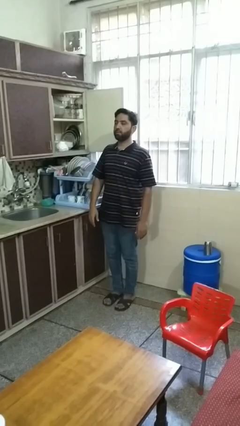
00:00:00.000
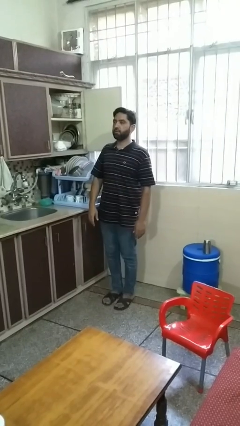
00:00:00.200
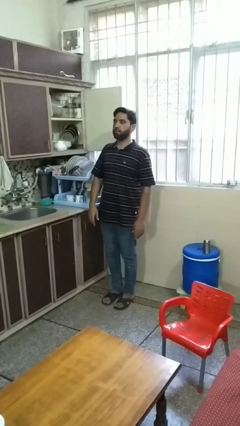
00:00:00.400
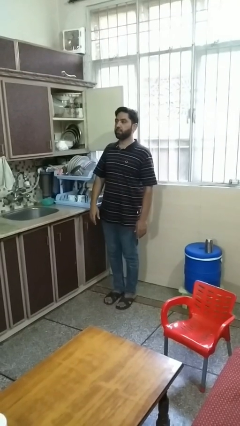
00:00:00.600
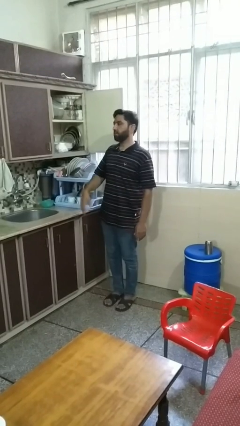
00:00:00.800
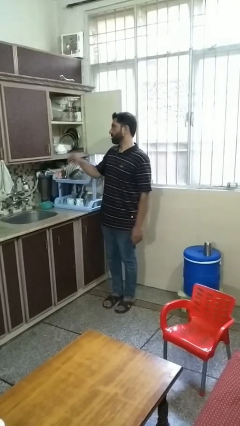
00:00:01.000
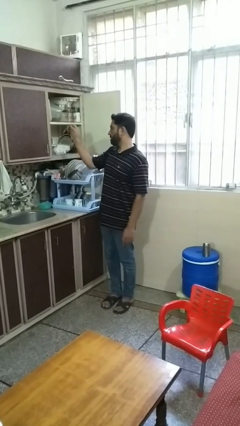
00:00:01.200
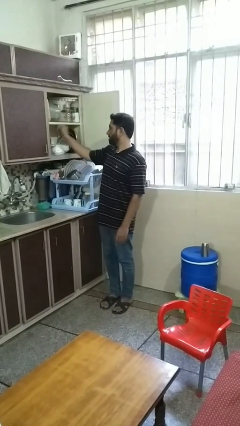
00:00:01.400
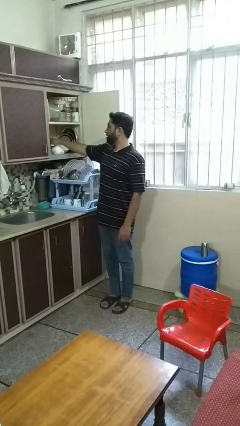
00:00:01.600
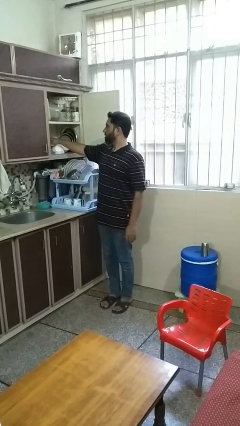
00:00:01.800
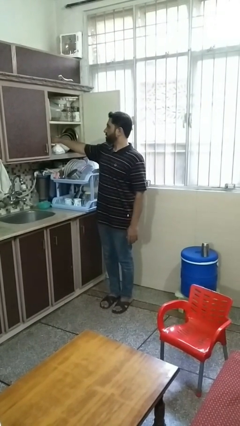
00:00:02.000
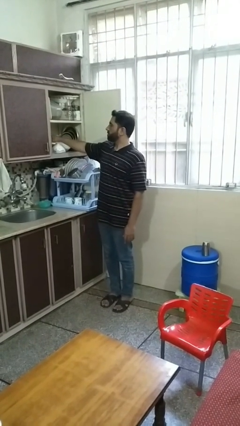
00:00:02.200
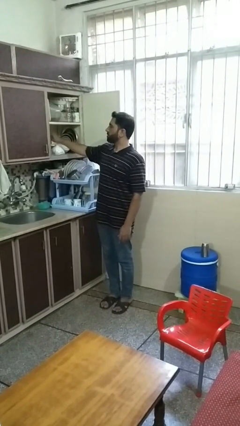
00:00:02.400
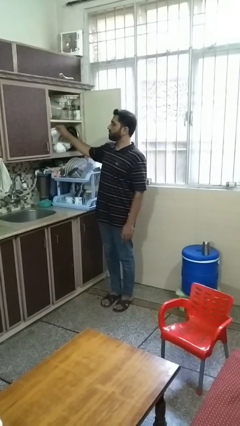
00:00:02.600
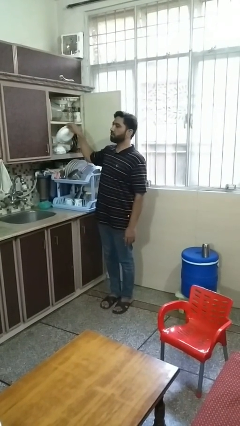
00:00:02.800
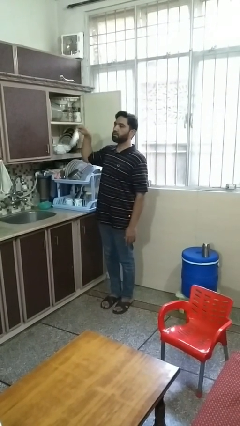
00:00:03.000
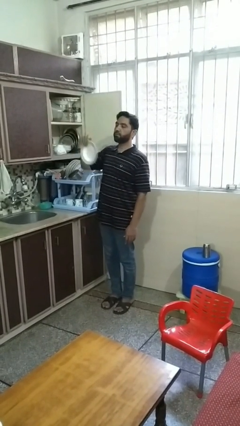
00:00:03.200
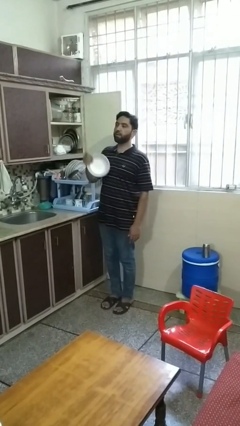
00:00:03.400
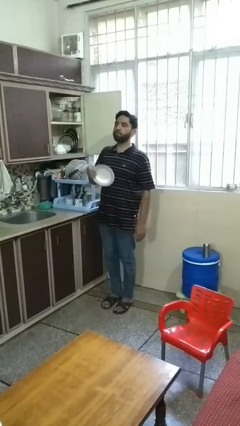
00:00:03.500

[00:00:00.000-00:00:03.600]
person takes object from cabinet

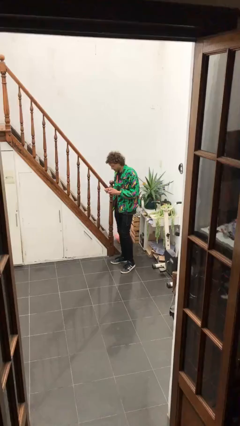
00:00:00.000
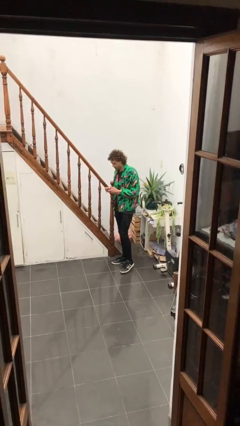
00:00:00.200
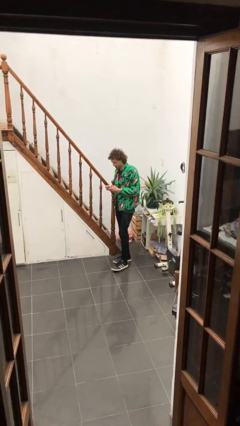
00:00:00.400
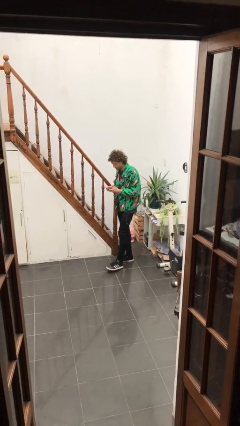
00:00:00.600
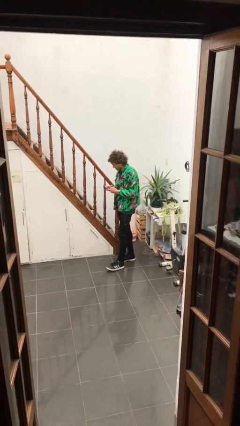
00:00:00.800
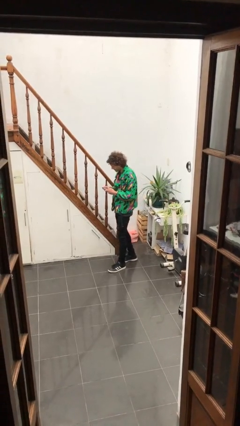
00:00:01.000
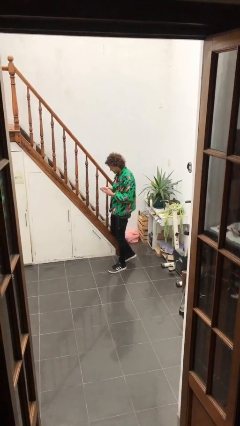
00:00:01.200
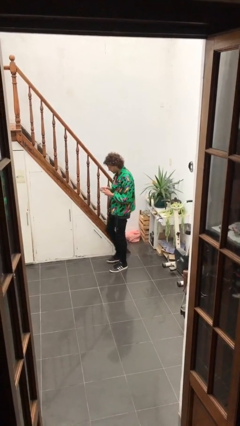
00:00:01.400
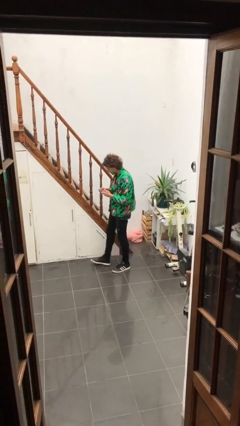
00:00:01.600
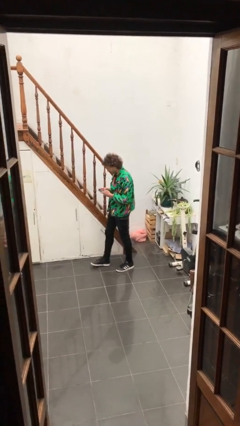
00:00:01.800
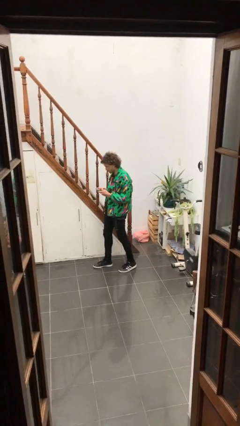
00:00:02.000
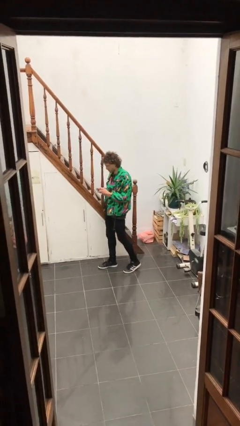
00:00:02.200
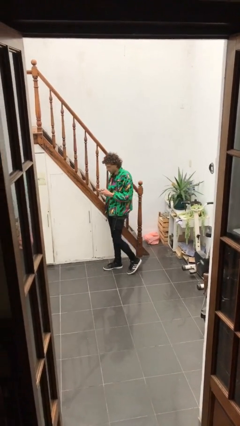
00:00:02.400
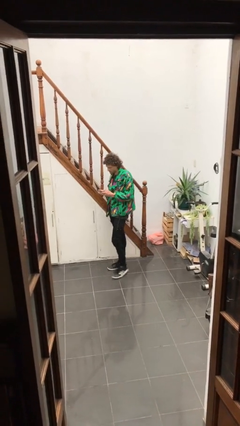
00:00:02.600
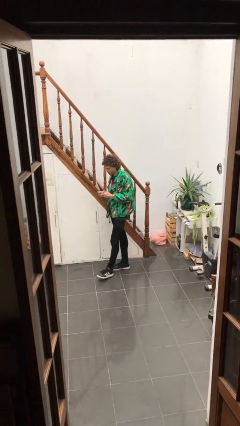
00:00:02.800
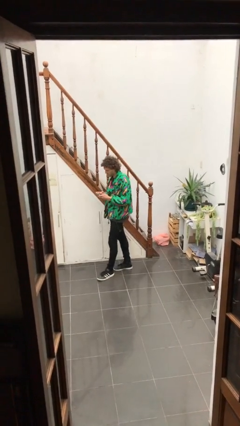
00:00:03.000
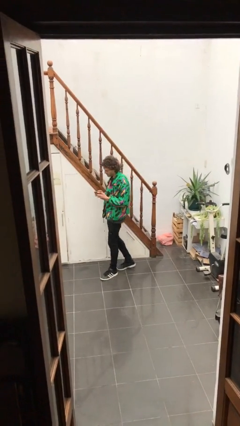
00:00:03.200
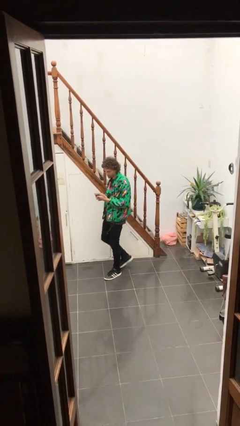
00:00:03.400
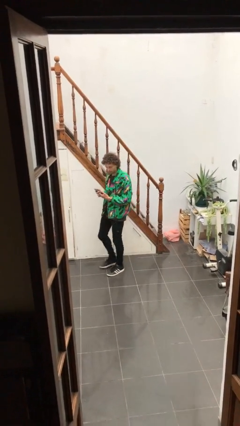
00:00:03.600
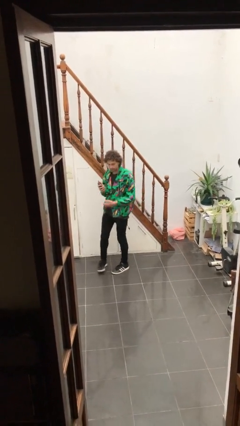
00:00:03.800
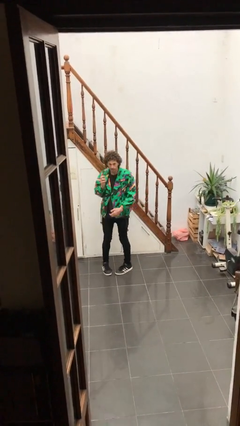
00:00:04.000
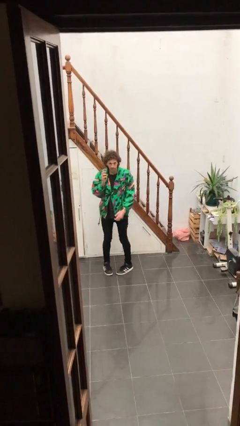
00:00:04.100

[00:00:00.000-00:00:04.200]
person texts on phone

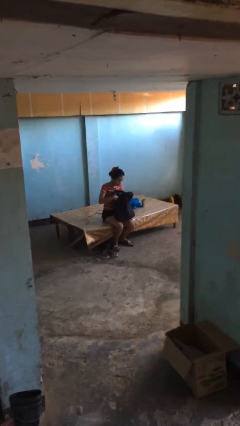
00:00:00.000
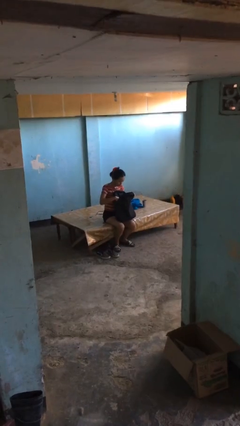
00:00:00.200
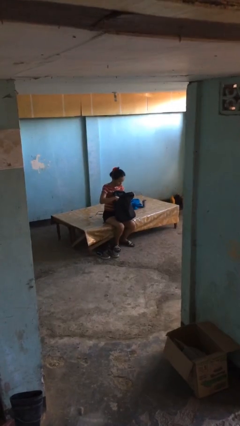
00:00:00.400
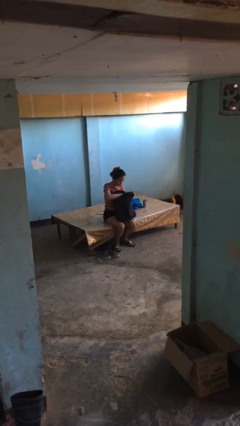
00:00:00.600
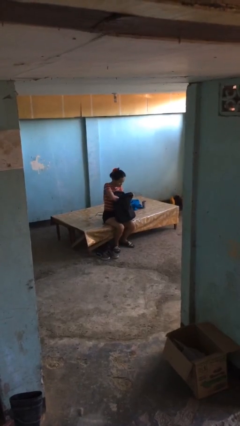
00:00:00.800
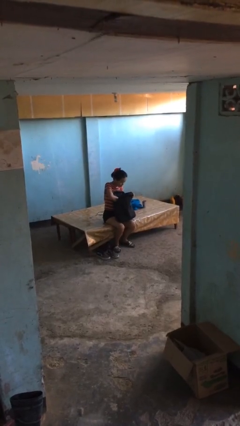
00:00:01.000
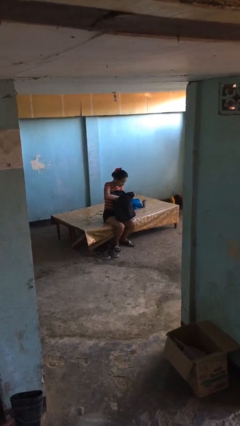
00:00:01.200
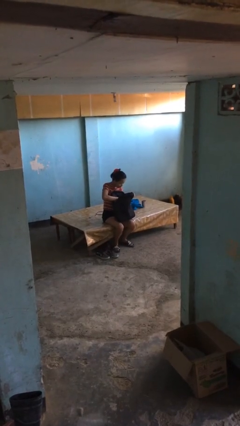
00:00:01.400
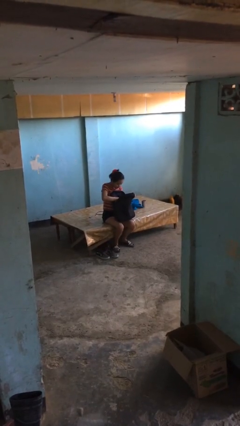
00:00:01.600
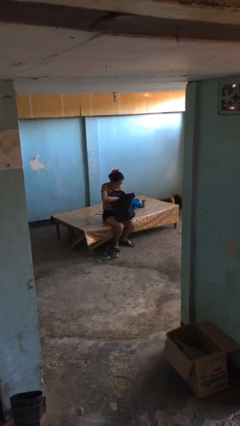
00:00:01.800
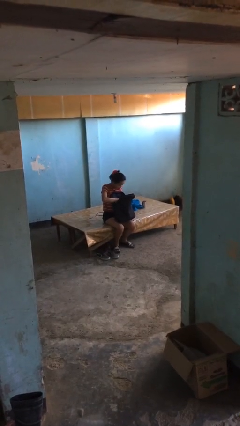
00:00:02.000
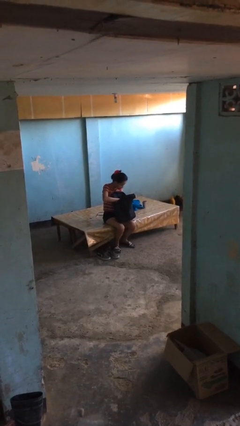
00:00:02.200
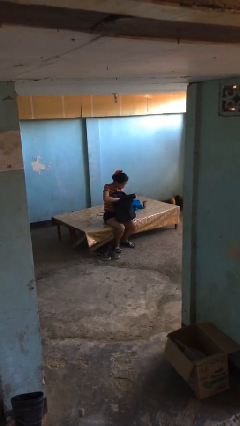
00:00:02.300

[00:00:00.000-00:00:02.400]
person searches in backpack

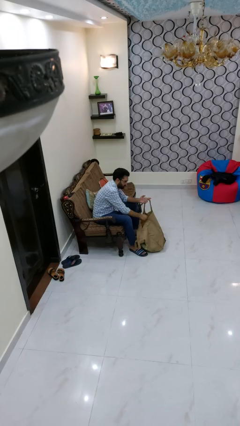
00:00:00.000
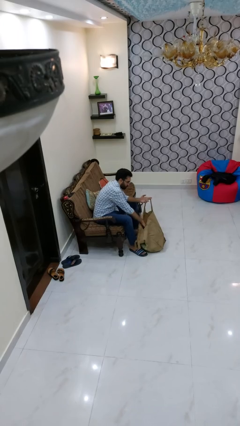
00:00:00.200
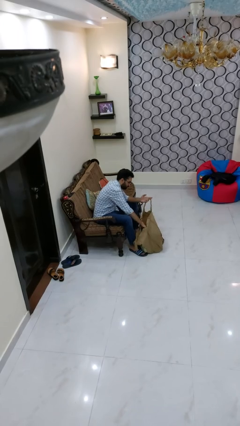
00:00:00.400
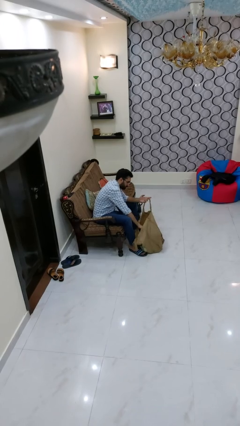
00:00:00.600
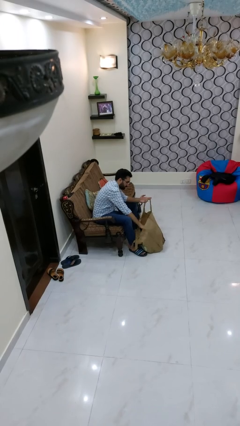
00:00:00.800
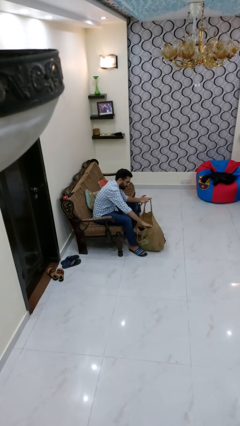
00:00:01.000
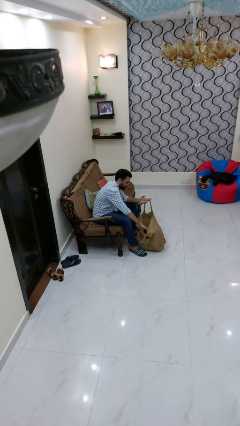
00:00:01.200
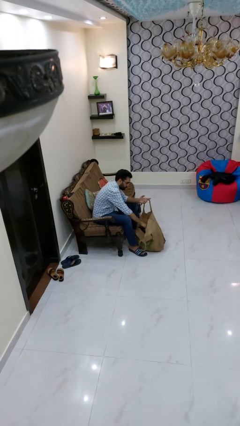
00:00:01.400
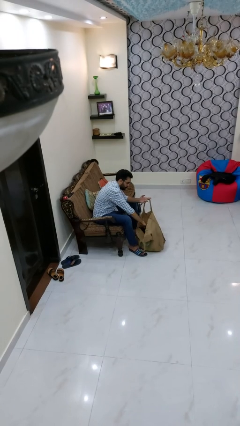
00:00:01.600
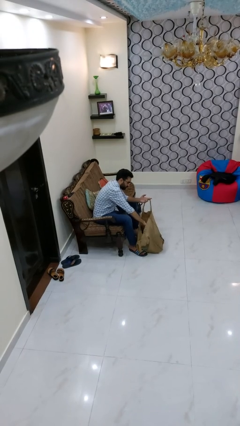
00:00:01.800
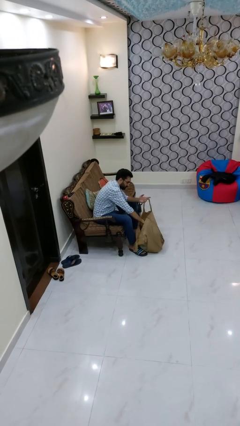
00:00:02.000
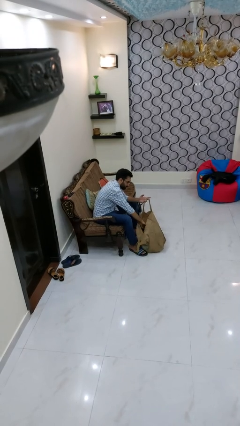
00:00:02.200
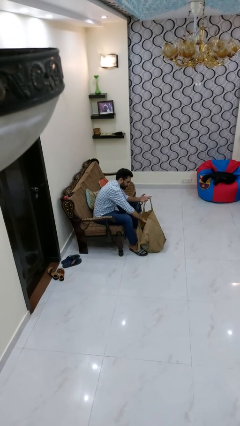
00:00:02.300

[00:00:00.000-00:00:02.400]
person searches in bag

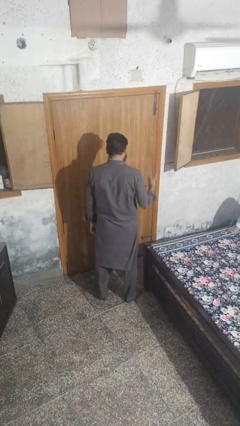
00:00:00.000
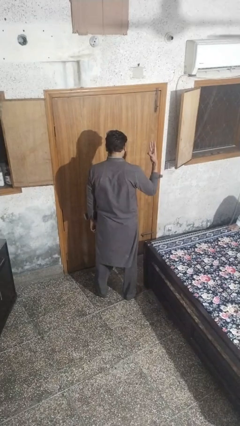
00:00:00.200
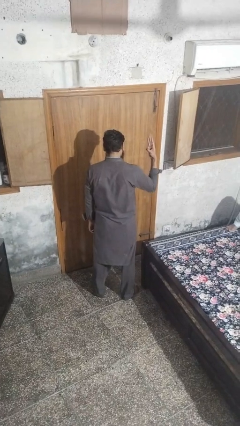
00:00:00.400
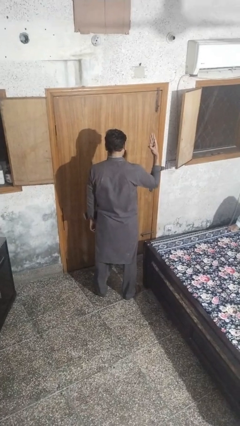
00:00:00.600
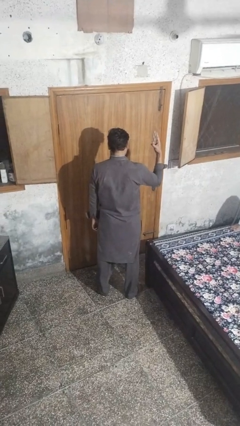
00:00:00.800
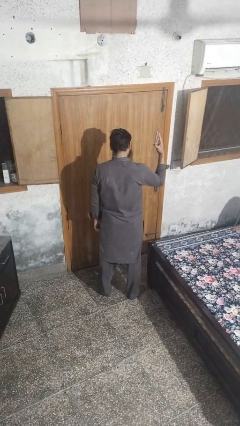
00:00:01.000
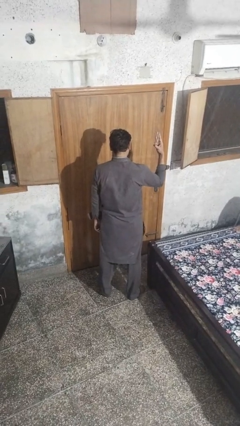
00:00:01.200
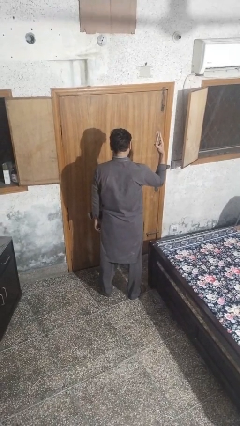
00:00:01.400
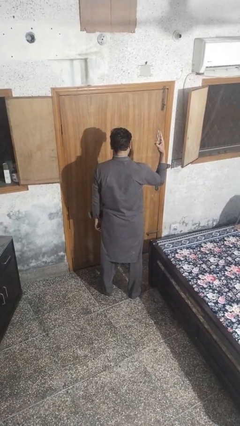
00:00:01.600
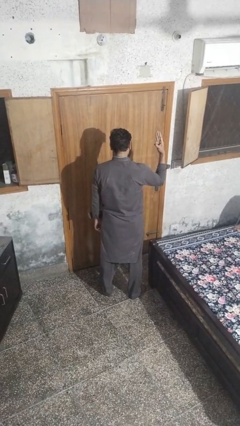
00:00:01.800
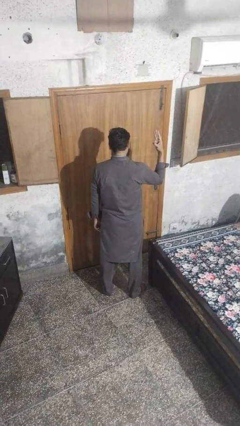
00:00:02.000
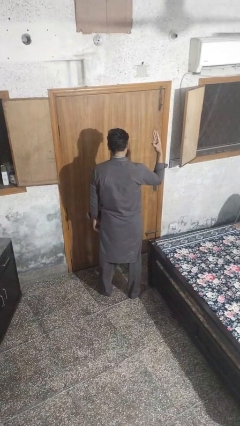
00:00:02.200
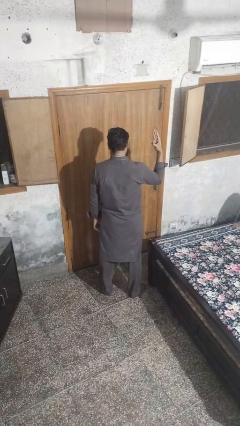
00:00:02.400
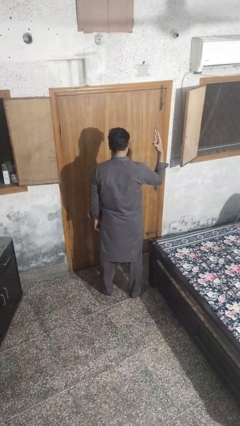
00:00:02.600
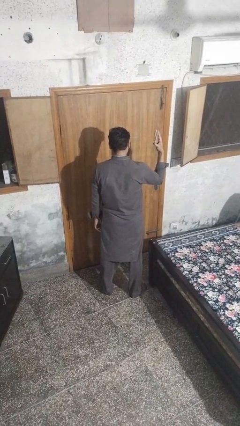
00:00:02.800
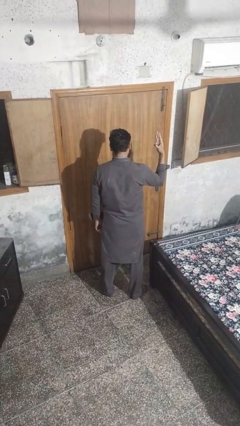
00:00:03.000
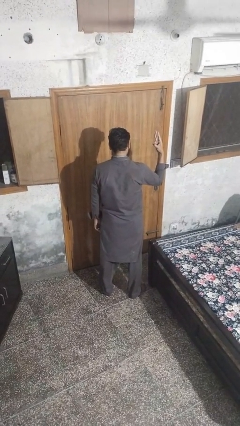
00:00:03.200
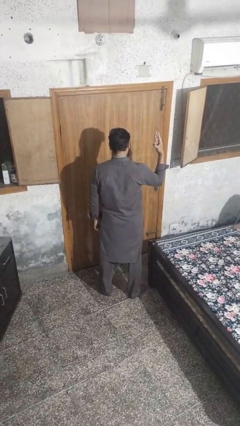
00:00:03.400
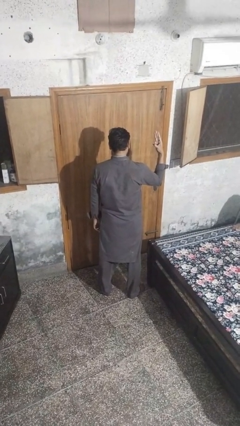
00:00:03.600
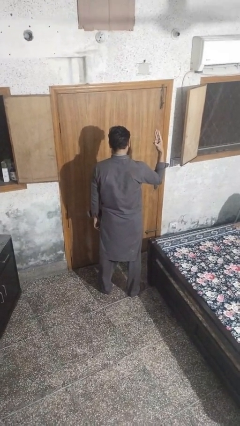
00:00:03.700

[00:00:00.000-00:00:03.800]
person gestures number three

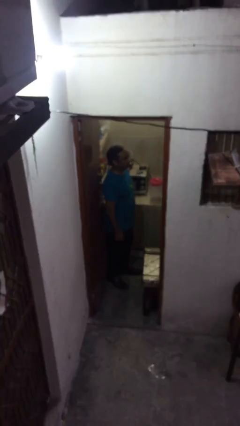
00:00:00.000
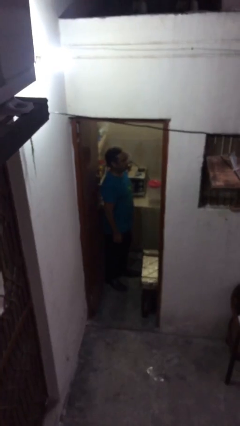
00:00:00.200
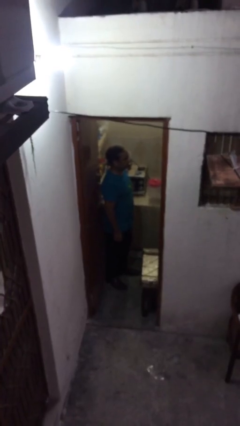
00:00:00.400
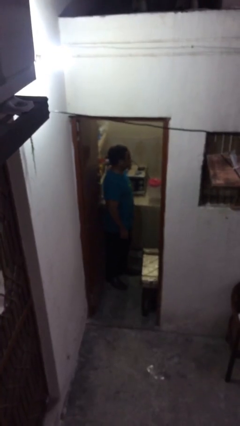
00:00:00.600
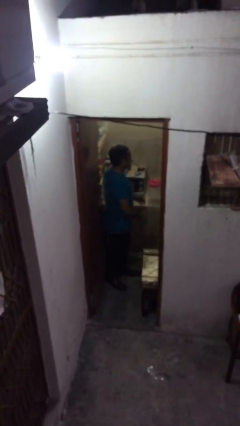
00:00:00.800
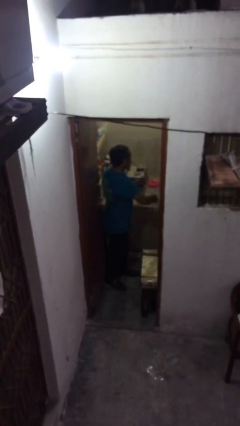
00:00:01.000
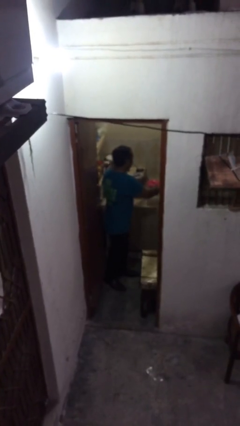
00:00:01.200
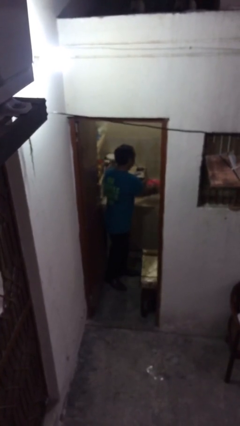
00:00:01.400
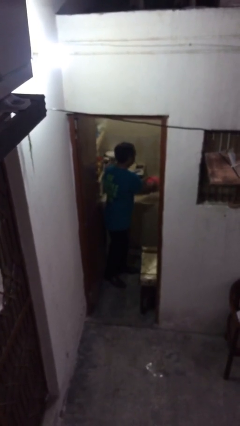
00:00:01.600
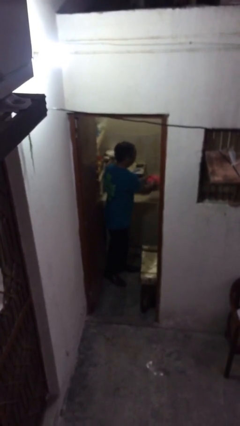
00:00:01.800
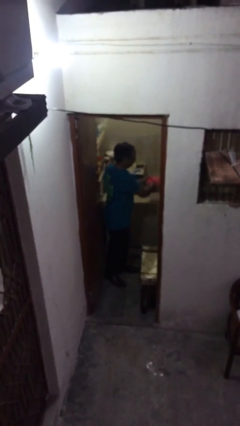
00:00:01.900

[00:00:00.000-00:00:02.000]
person picks up object from shelf
